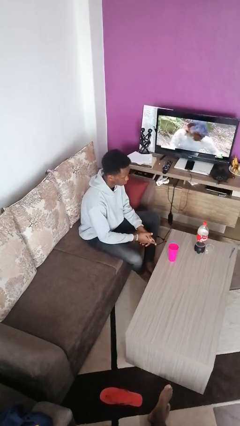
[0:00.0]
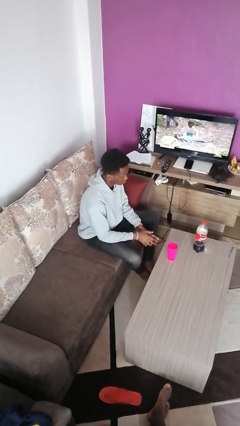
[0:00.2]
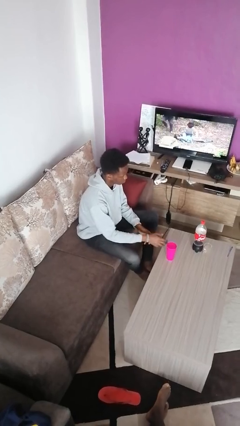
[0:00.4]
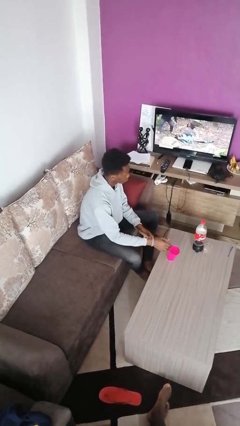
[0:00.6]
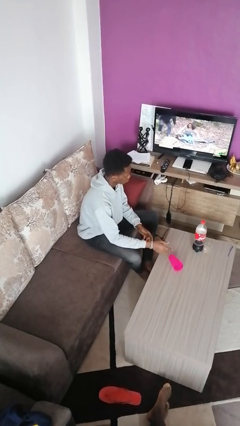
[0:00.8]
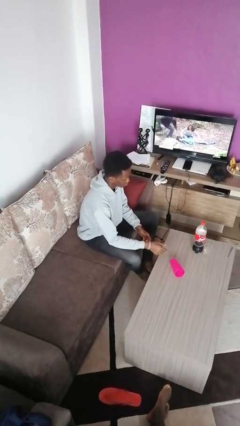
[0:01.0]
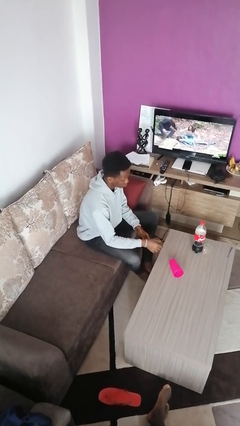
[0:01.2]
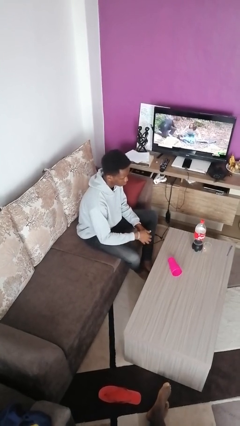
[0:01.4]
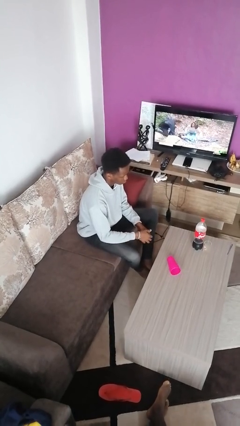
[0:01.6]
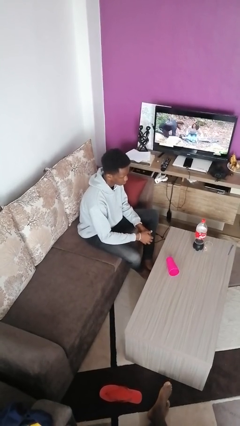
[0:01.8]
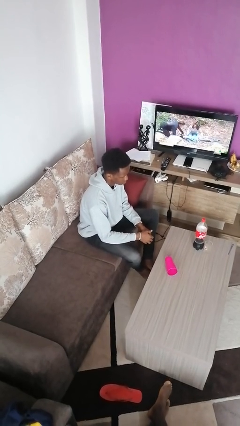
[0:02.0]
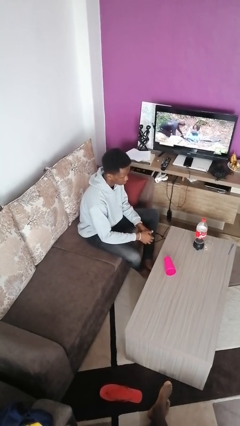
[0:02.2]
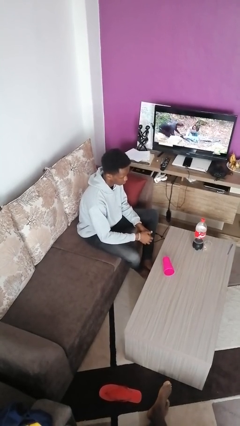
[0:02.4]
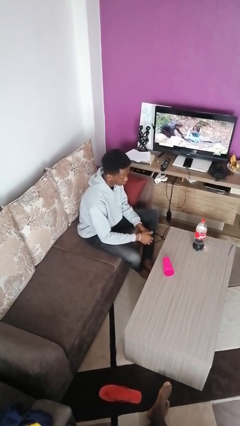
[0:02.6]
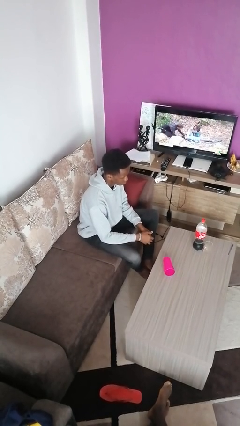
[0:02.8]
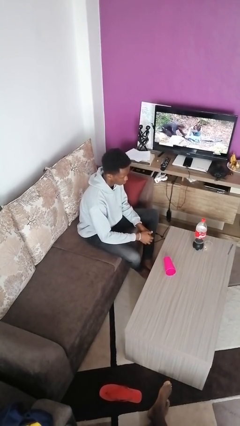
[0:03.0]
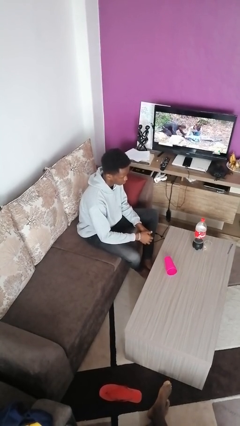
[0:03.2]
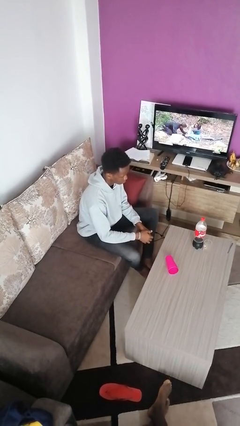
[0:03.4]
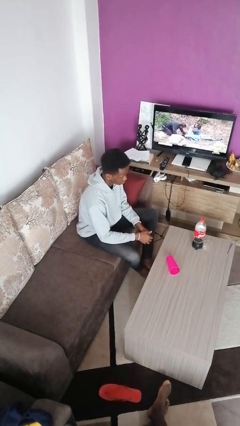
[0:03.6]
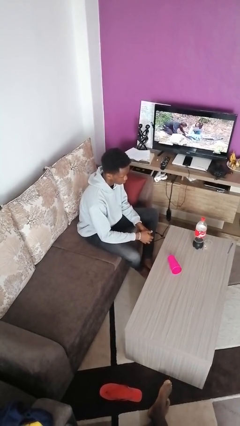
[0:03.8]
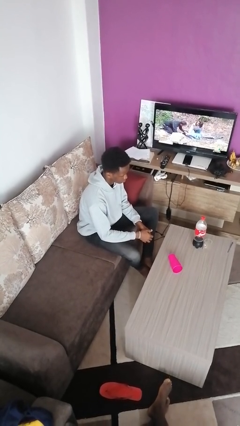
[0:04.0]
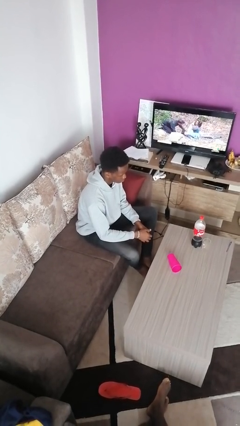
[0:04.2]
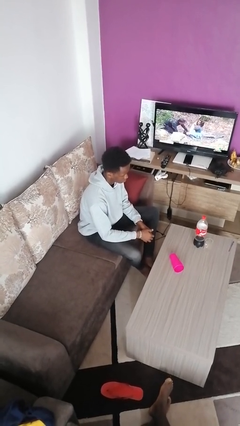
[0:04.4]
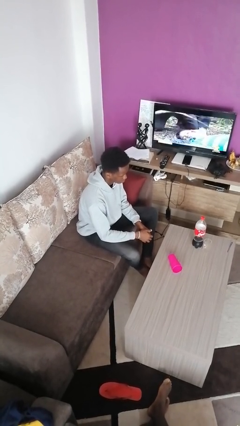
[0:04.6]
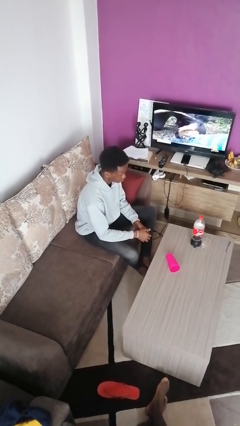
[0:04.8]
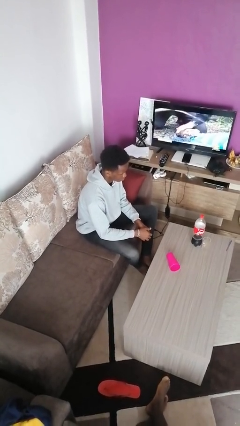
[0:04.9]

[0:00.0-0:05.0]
person knocks over glass

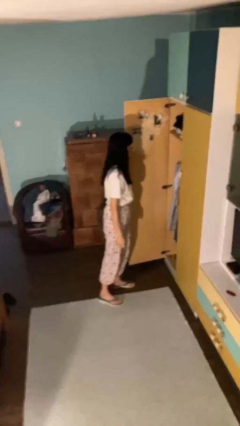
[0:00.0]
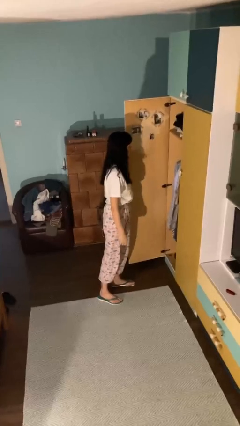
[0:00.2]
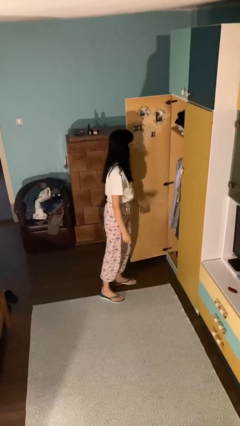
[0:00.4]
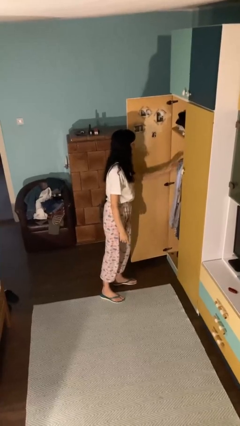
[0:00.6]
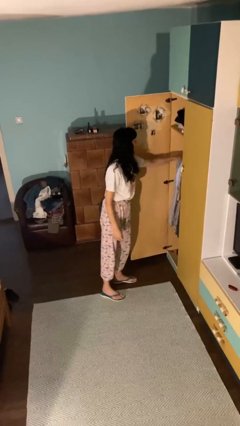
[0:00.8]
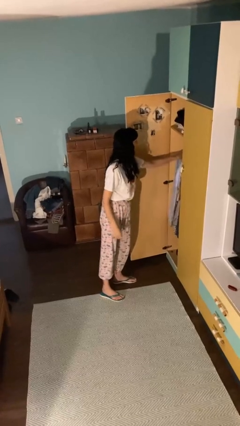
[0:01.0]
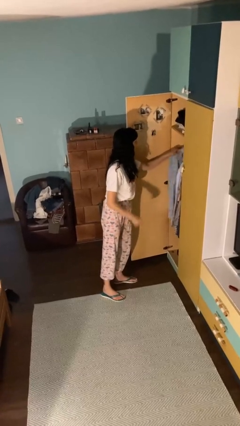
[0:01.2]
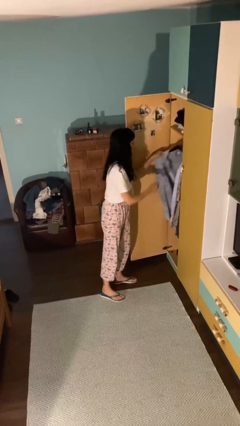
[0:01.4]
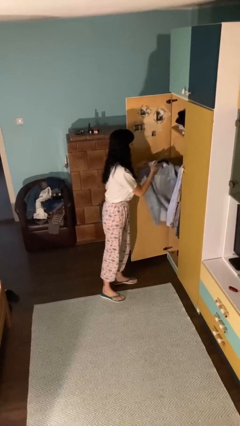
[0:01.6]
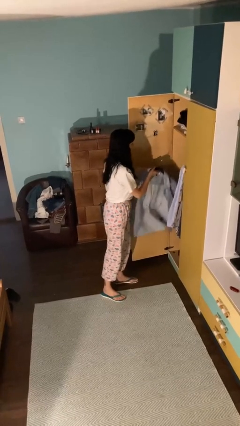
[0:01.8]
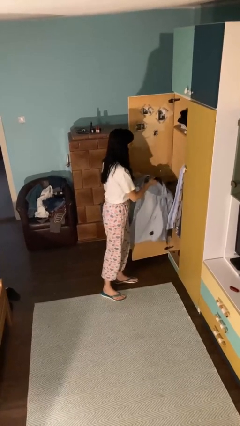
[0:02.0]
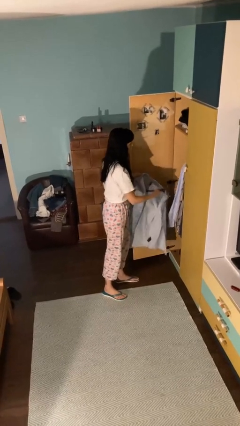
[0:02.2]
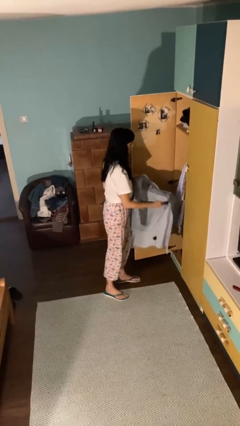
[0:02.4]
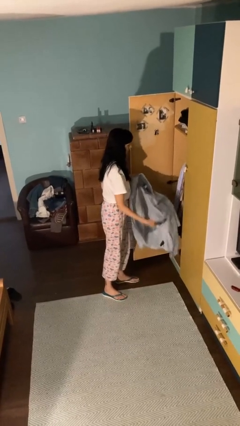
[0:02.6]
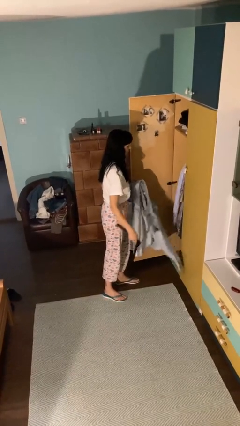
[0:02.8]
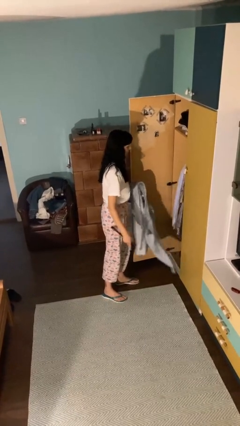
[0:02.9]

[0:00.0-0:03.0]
person takes clothes from closet

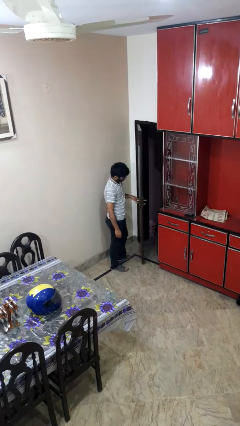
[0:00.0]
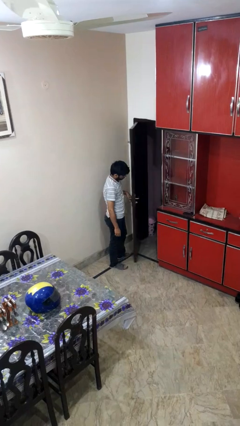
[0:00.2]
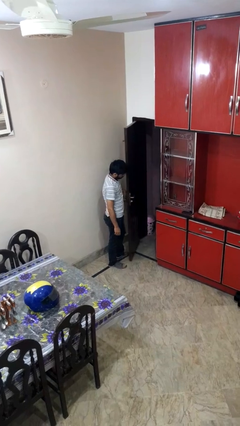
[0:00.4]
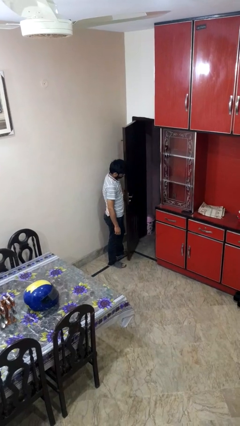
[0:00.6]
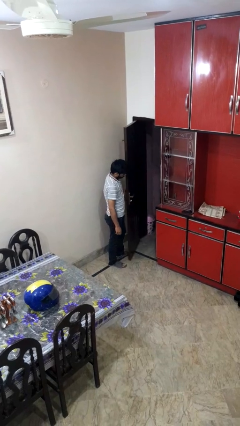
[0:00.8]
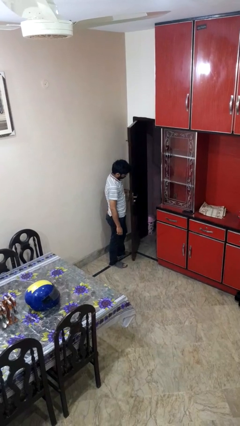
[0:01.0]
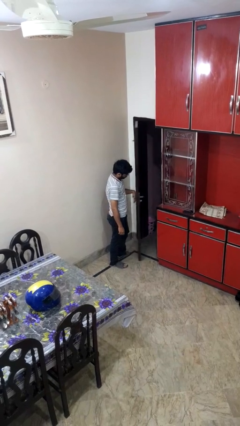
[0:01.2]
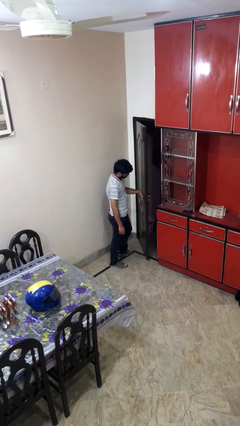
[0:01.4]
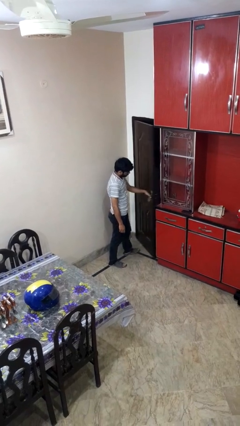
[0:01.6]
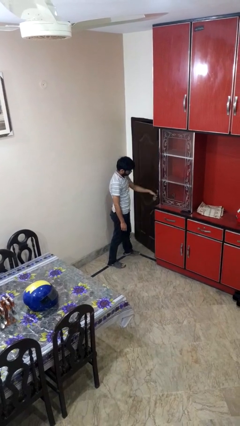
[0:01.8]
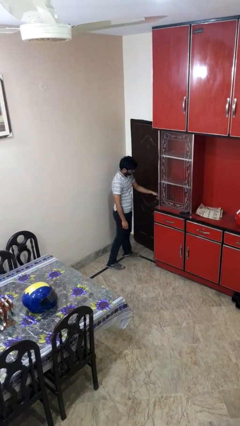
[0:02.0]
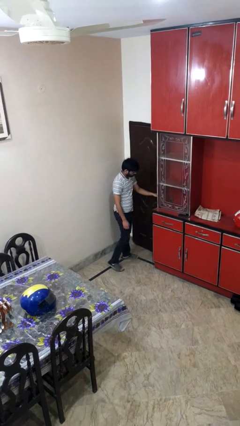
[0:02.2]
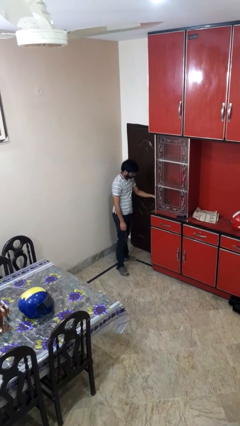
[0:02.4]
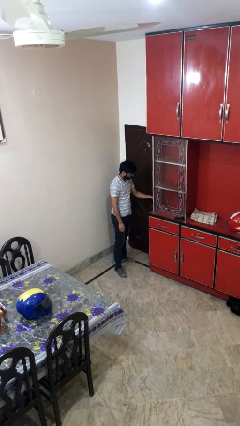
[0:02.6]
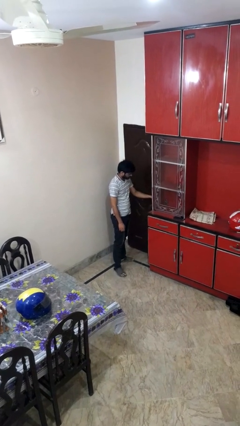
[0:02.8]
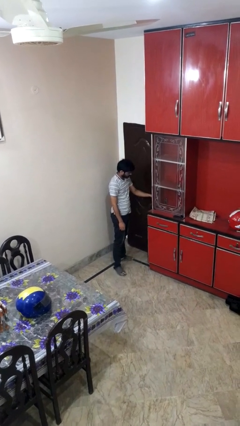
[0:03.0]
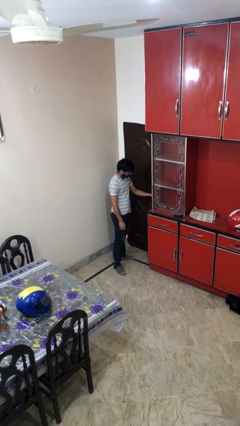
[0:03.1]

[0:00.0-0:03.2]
person closes facility door

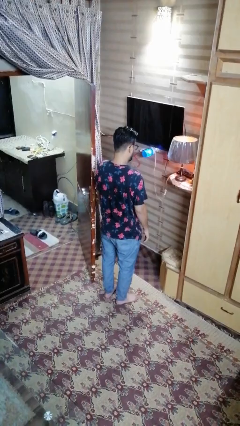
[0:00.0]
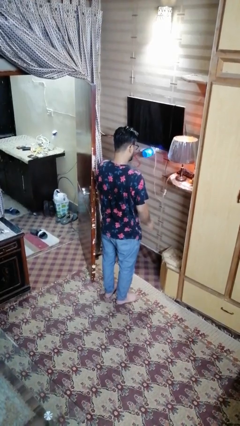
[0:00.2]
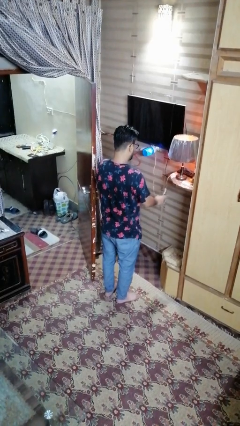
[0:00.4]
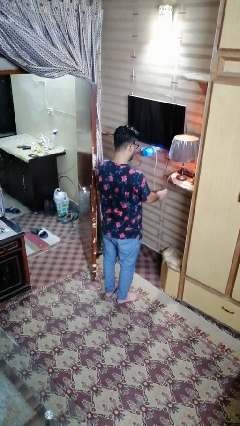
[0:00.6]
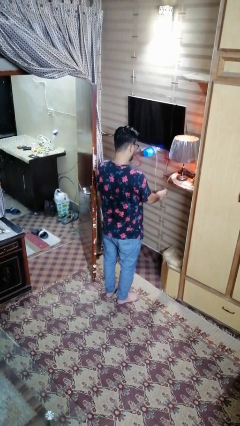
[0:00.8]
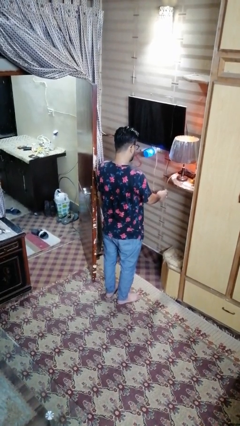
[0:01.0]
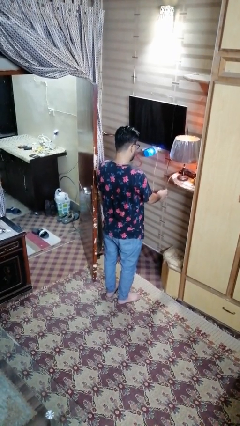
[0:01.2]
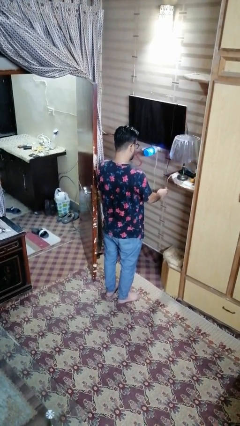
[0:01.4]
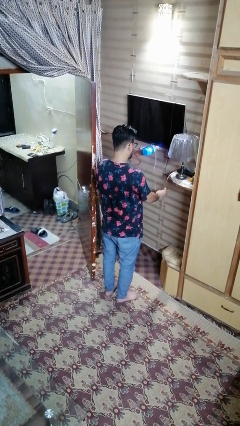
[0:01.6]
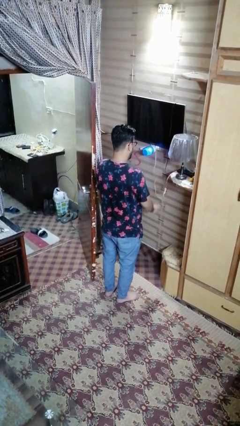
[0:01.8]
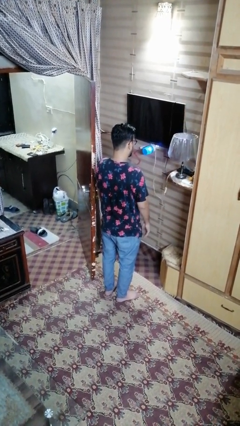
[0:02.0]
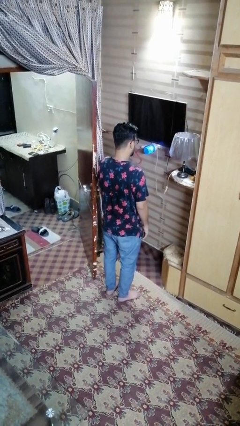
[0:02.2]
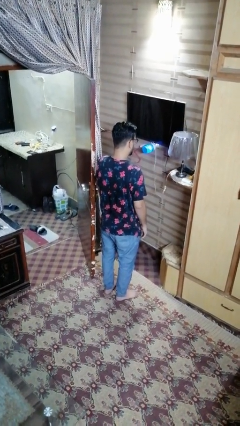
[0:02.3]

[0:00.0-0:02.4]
person turns off lamp

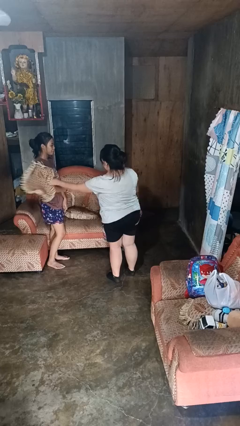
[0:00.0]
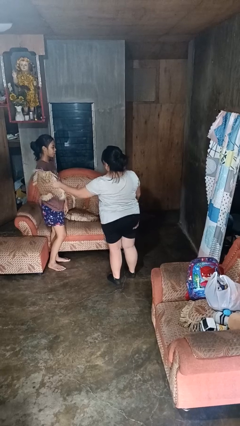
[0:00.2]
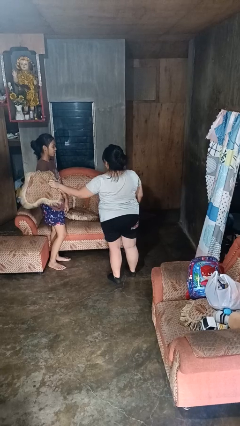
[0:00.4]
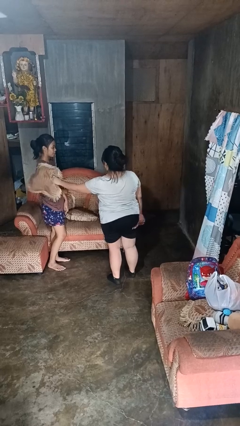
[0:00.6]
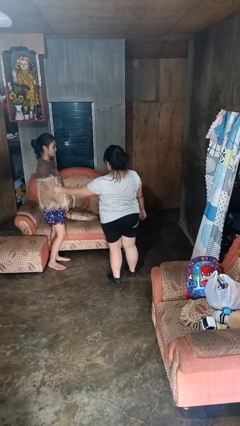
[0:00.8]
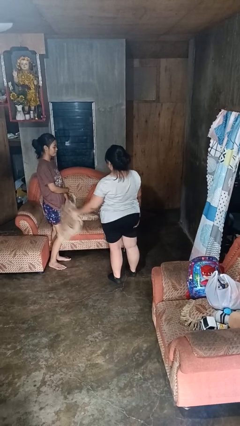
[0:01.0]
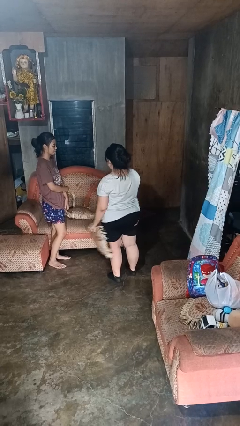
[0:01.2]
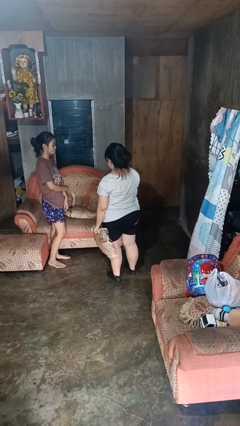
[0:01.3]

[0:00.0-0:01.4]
person hits person with pillow

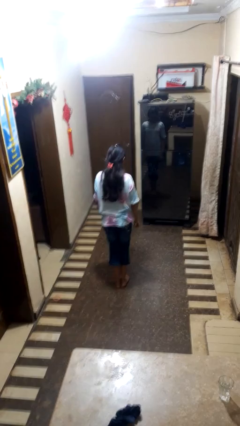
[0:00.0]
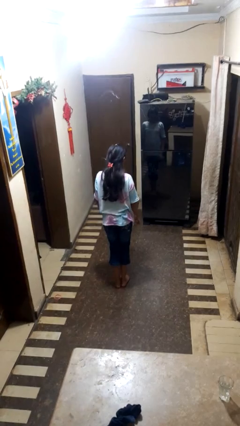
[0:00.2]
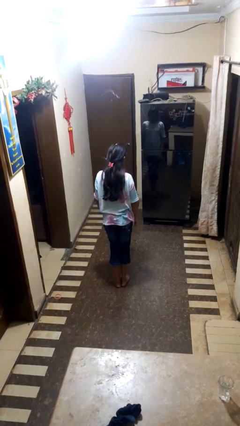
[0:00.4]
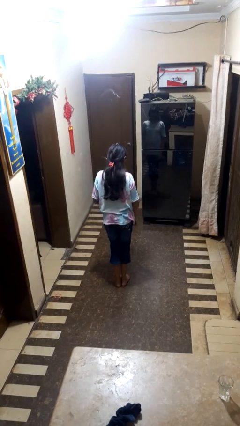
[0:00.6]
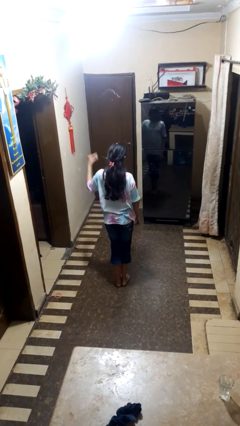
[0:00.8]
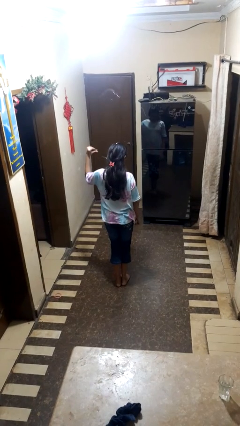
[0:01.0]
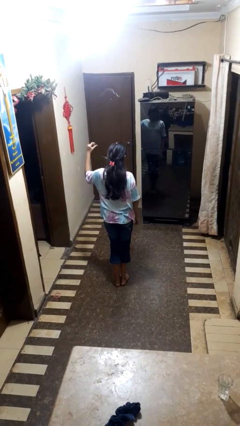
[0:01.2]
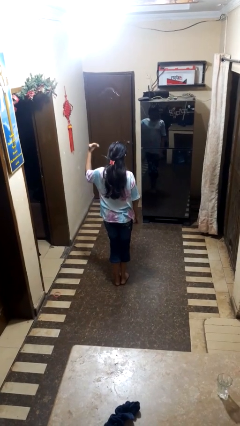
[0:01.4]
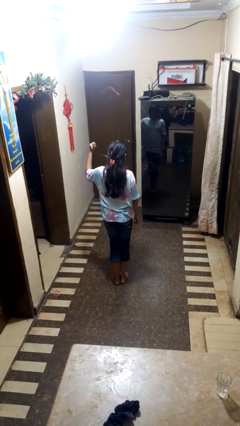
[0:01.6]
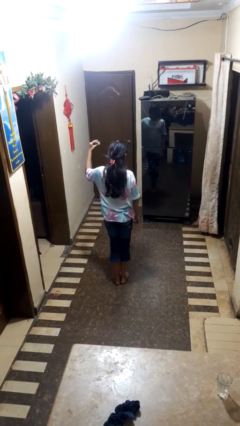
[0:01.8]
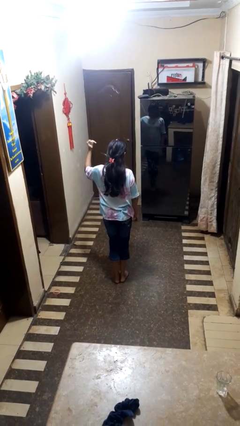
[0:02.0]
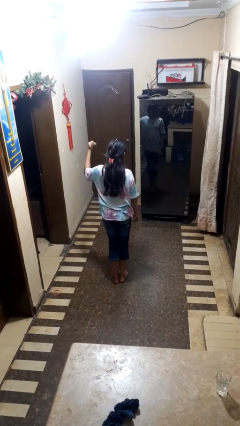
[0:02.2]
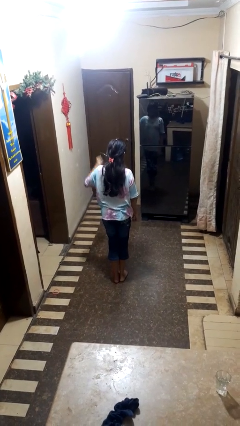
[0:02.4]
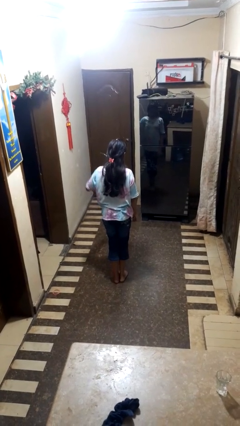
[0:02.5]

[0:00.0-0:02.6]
person snaps fingers
